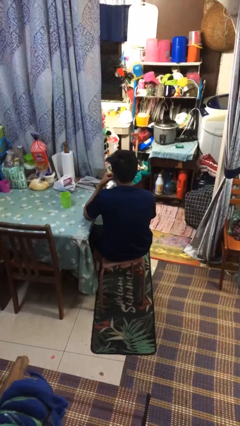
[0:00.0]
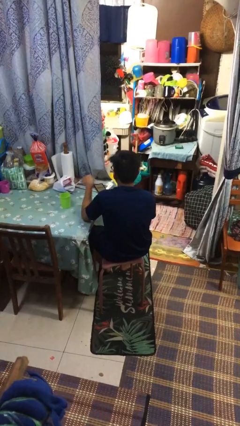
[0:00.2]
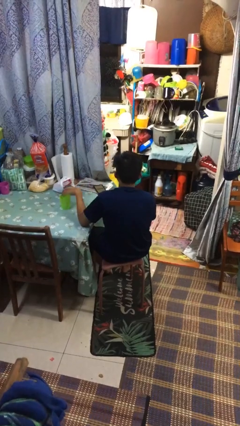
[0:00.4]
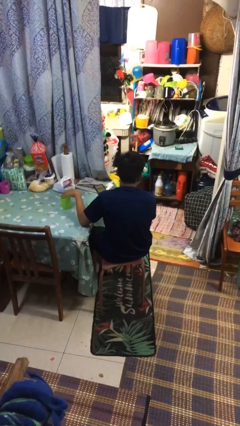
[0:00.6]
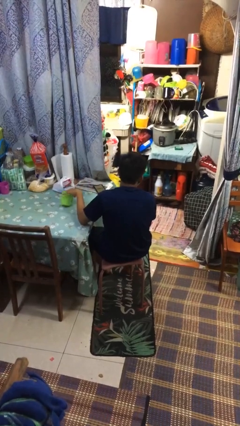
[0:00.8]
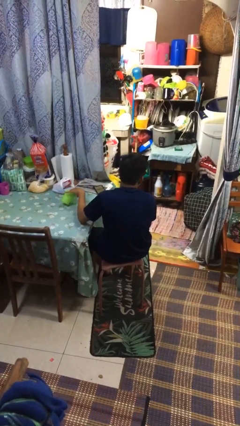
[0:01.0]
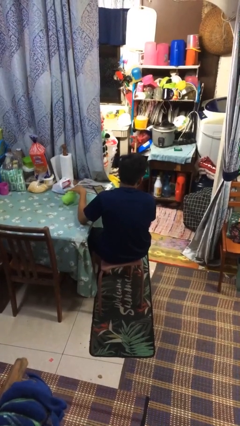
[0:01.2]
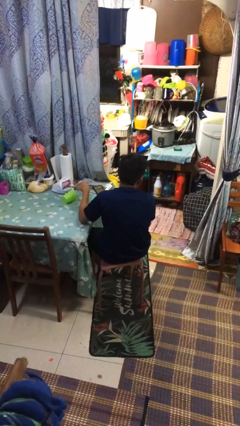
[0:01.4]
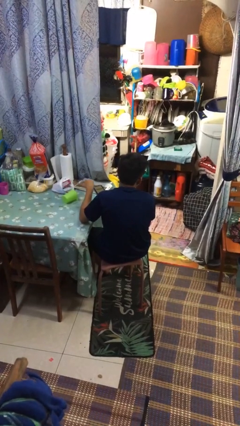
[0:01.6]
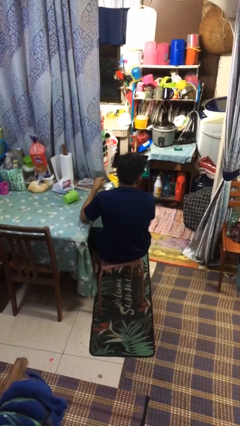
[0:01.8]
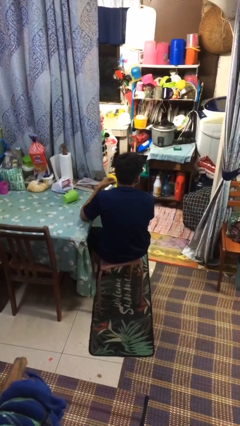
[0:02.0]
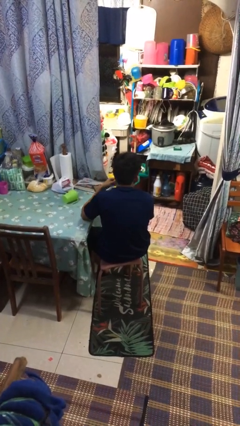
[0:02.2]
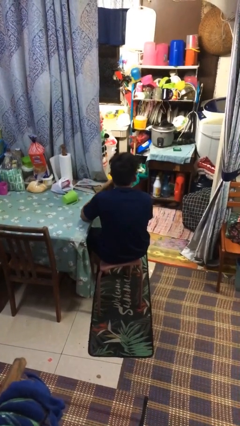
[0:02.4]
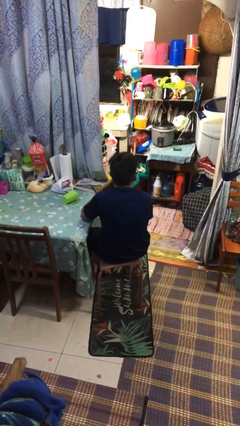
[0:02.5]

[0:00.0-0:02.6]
person knocks over glass

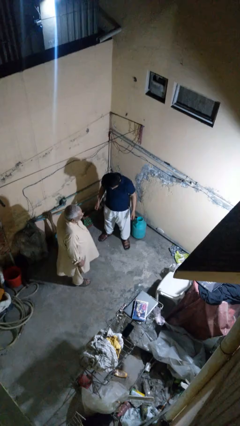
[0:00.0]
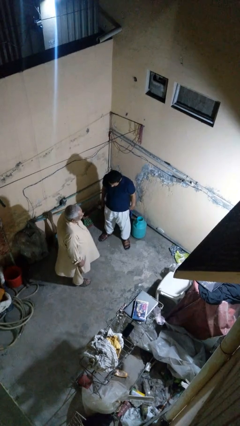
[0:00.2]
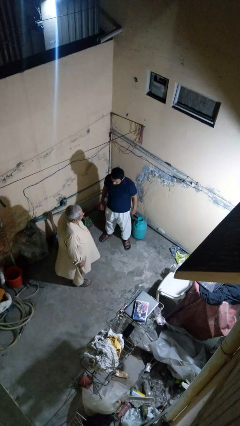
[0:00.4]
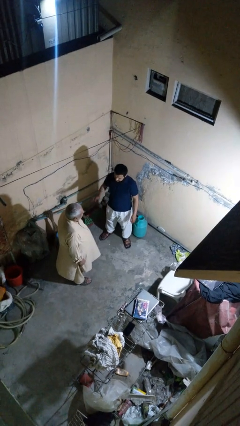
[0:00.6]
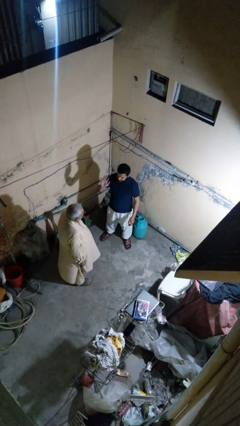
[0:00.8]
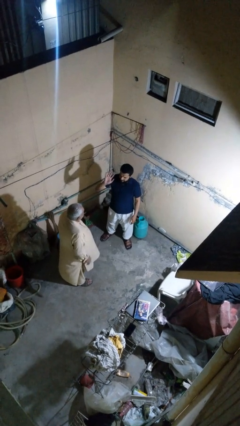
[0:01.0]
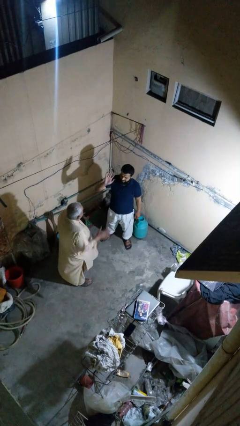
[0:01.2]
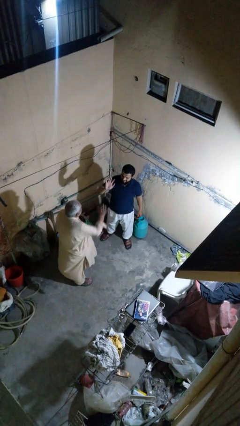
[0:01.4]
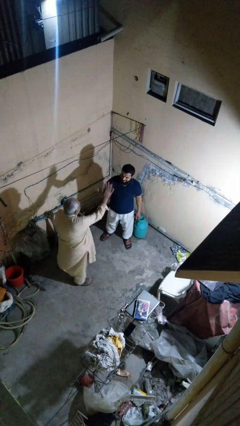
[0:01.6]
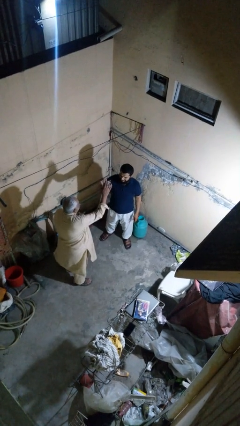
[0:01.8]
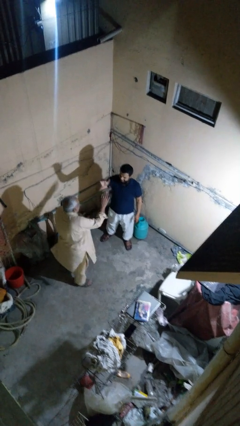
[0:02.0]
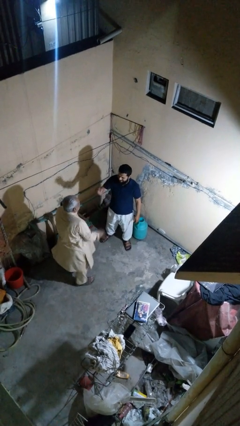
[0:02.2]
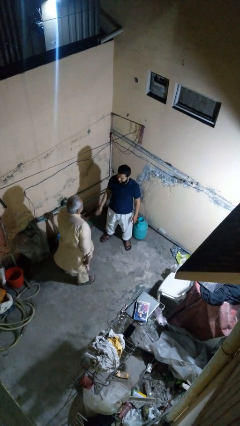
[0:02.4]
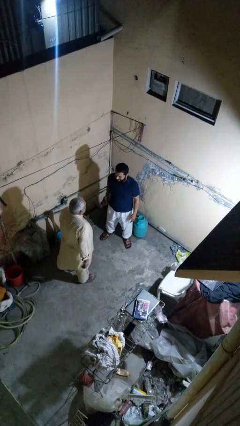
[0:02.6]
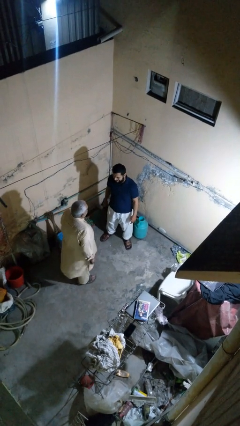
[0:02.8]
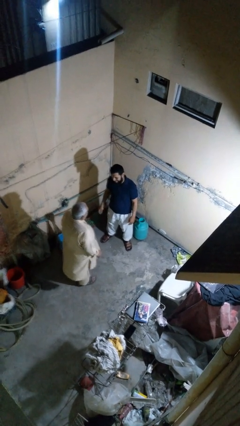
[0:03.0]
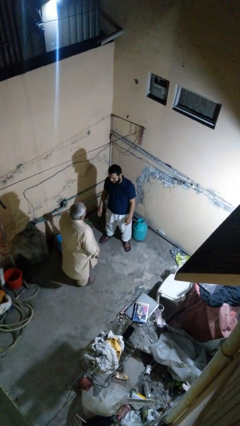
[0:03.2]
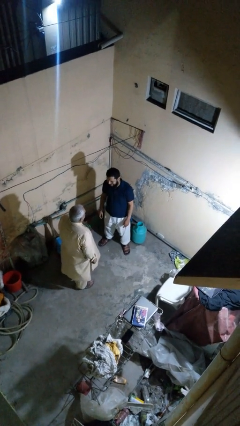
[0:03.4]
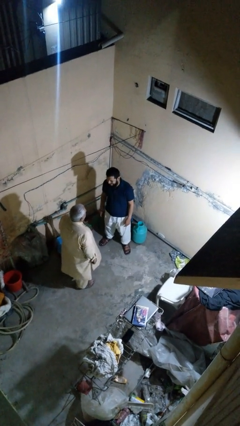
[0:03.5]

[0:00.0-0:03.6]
person highfives hand

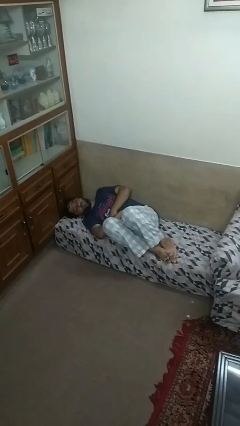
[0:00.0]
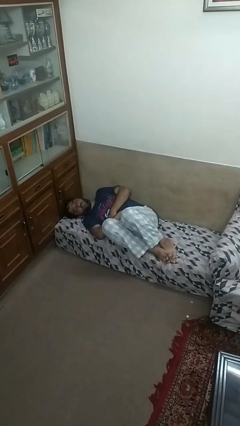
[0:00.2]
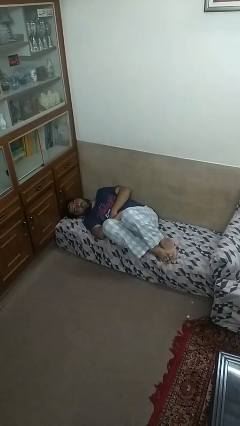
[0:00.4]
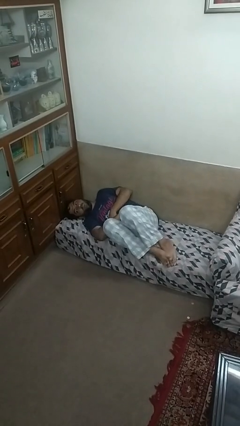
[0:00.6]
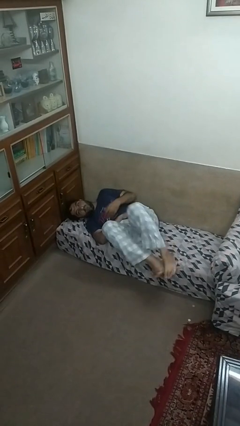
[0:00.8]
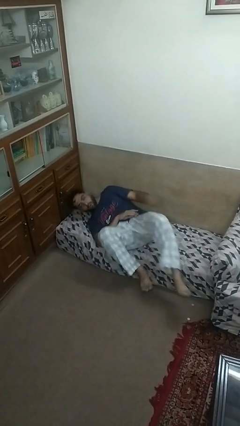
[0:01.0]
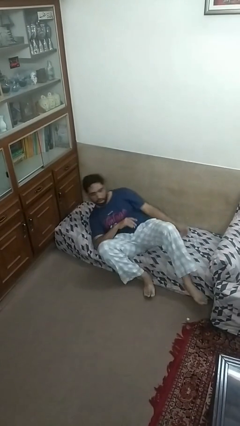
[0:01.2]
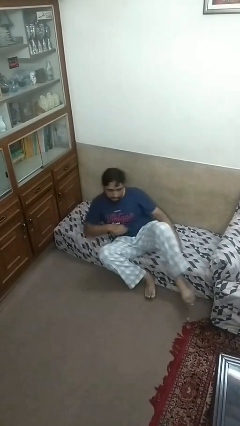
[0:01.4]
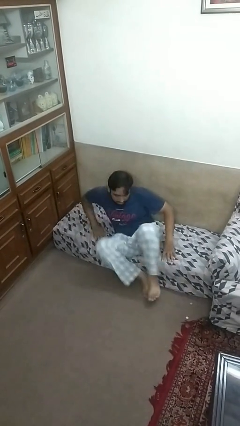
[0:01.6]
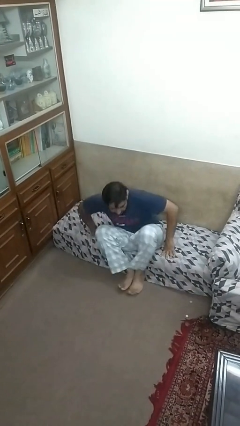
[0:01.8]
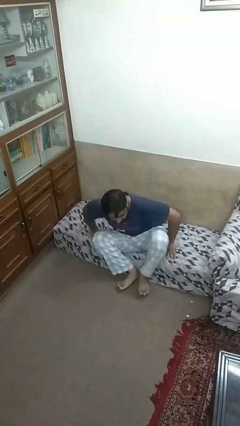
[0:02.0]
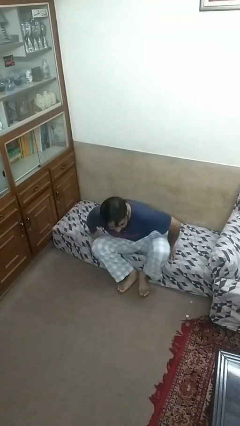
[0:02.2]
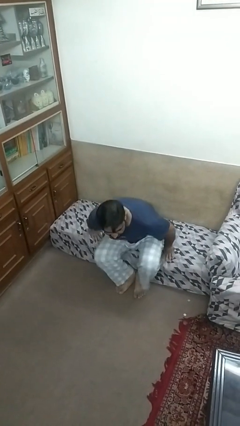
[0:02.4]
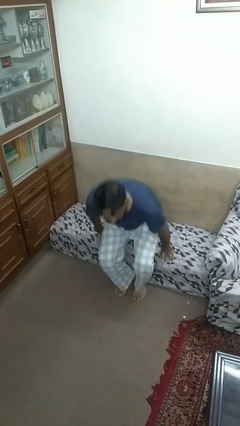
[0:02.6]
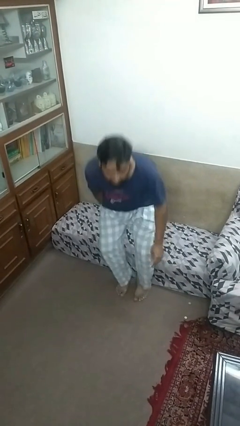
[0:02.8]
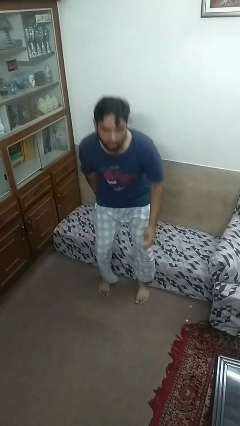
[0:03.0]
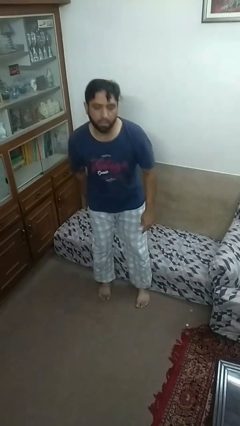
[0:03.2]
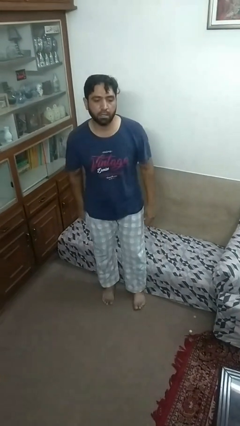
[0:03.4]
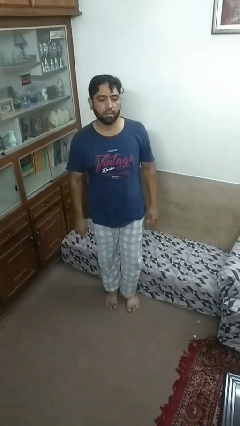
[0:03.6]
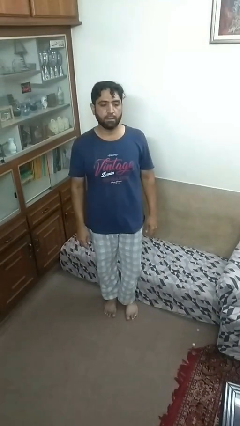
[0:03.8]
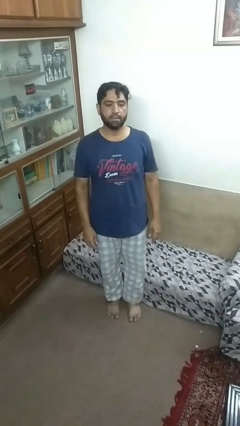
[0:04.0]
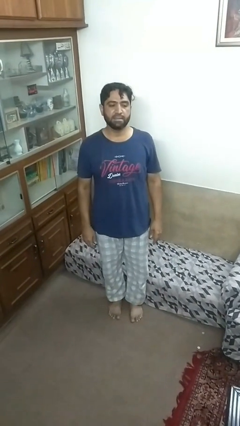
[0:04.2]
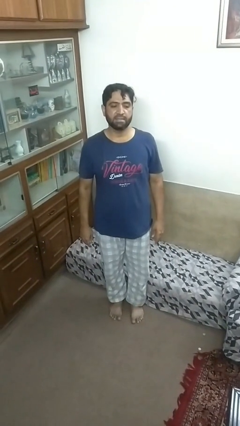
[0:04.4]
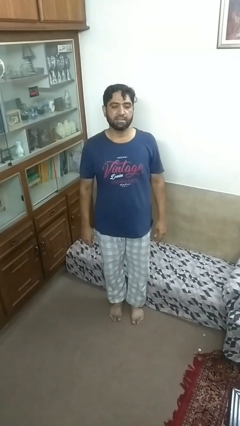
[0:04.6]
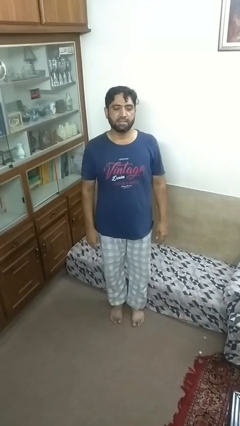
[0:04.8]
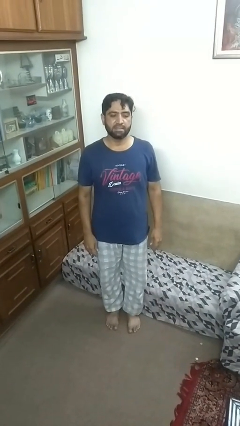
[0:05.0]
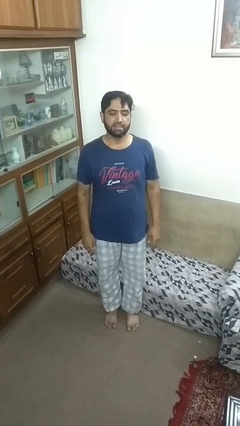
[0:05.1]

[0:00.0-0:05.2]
person stands up

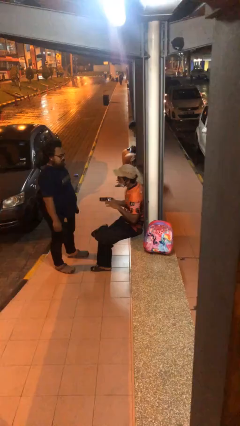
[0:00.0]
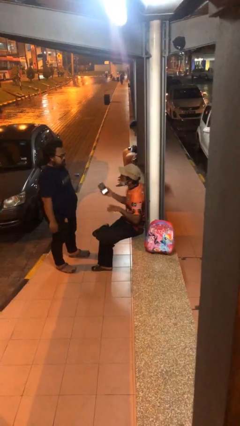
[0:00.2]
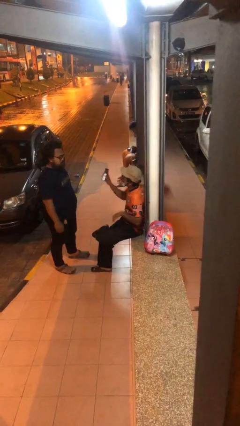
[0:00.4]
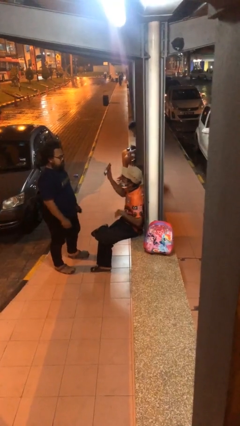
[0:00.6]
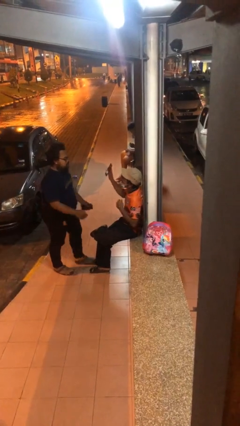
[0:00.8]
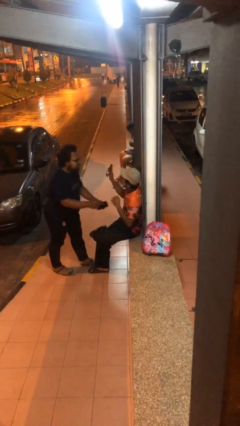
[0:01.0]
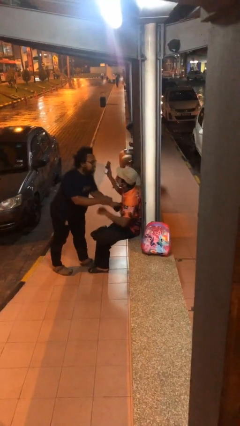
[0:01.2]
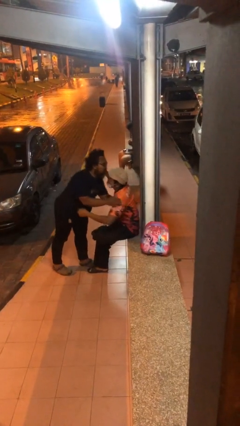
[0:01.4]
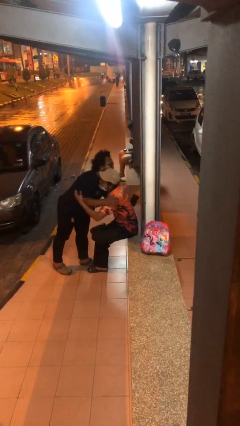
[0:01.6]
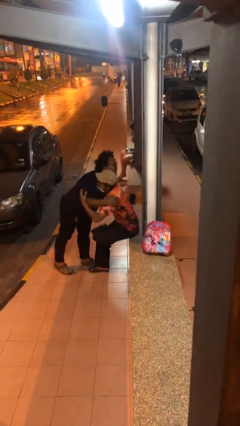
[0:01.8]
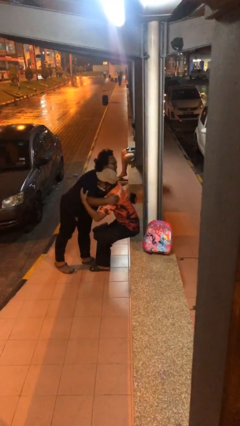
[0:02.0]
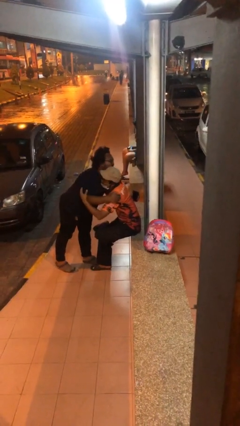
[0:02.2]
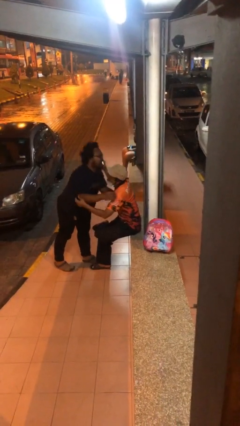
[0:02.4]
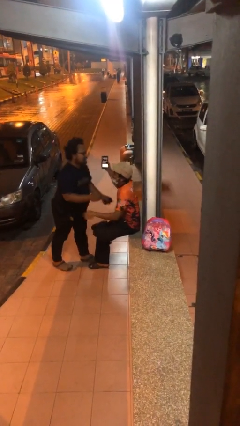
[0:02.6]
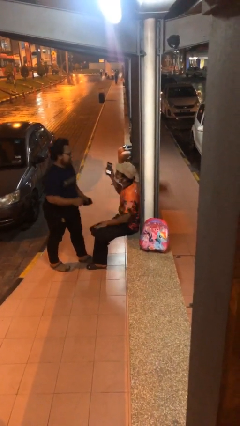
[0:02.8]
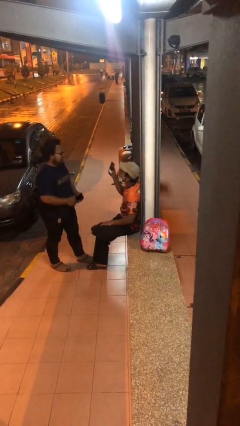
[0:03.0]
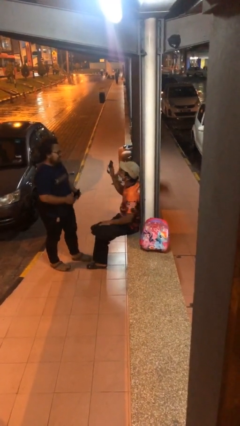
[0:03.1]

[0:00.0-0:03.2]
person embraces person

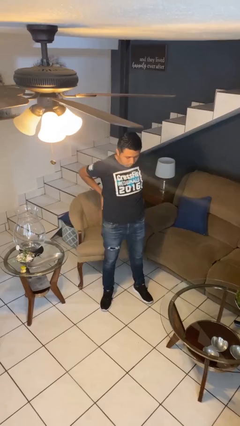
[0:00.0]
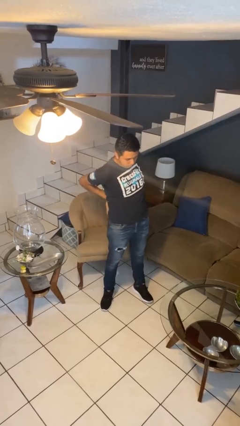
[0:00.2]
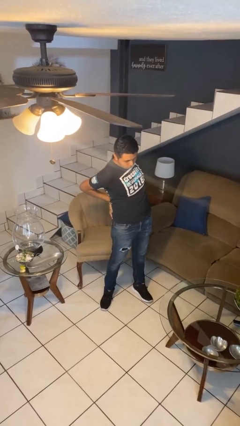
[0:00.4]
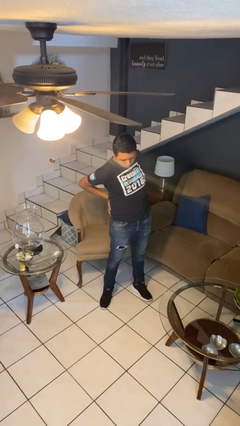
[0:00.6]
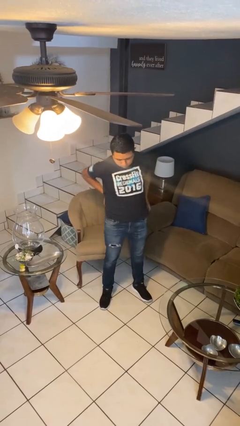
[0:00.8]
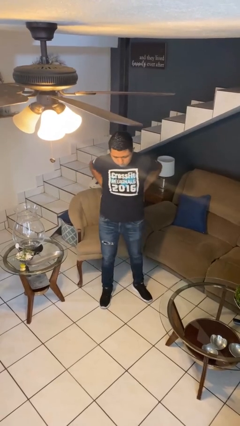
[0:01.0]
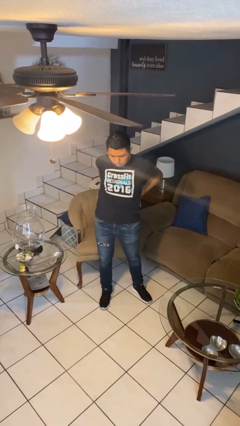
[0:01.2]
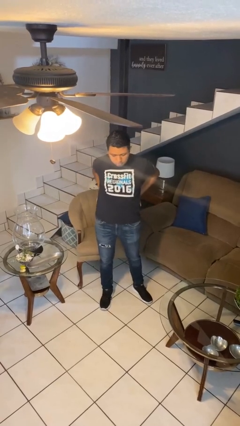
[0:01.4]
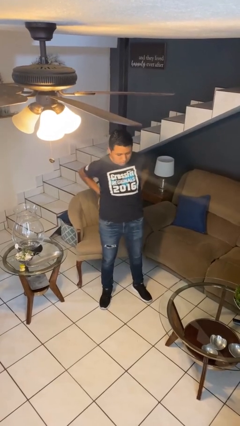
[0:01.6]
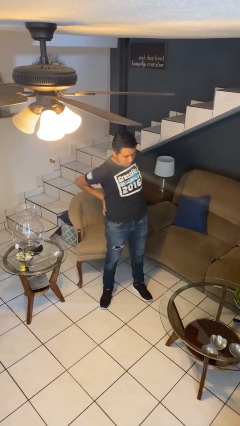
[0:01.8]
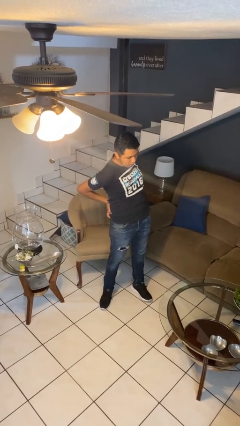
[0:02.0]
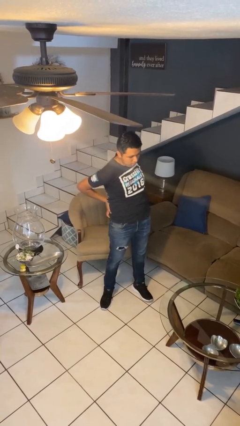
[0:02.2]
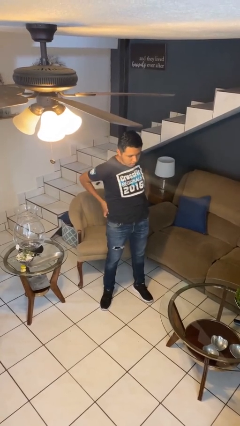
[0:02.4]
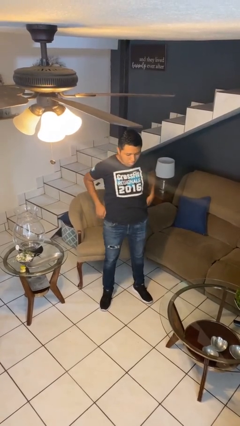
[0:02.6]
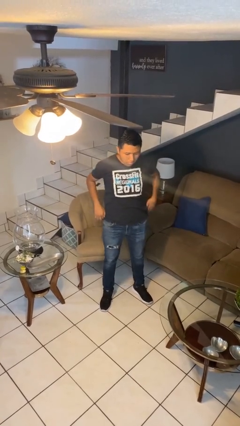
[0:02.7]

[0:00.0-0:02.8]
person stretches back
